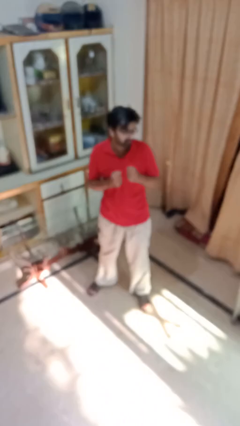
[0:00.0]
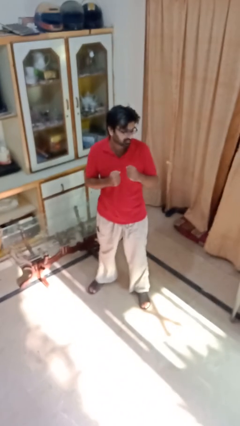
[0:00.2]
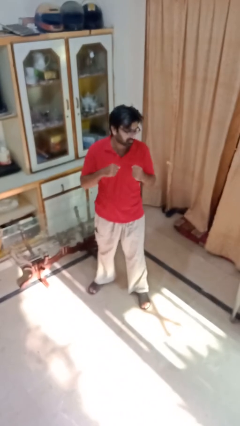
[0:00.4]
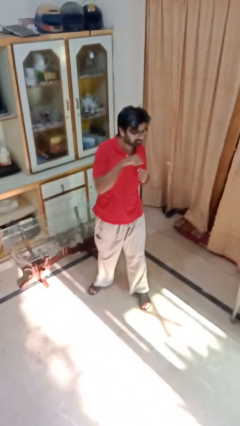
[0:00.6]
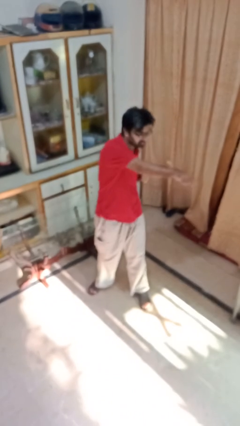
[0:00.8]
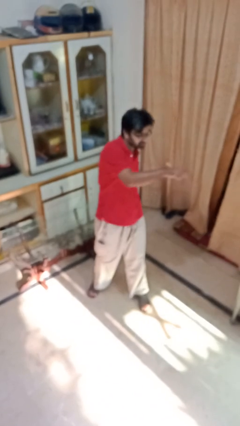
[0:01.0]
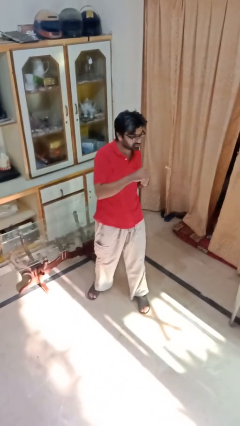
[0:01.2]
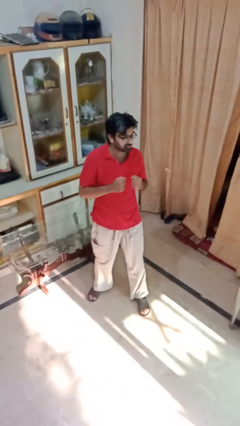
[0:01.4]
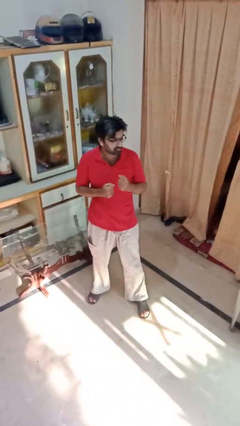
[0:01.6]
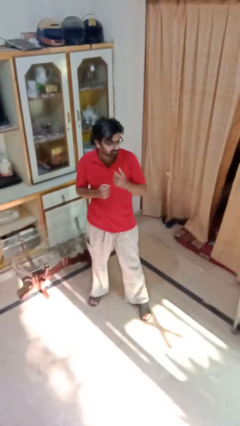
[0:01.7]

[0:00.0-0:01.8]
person punches

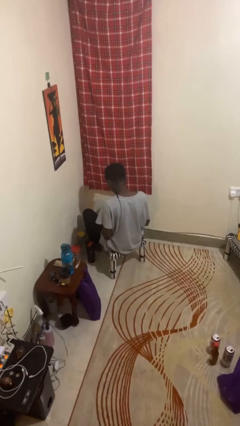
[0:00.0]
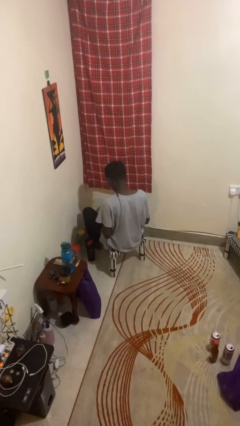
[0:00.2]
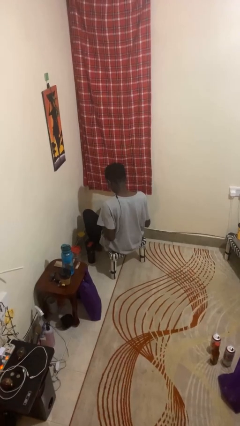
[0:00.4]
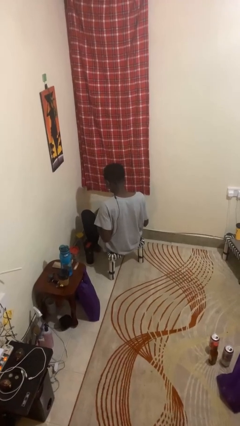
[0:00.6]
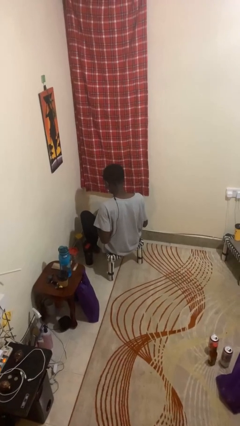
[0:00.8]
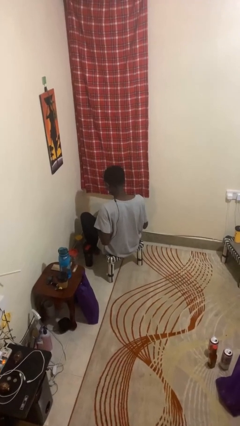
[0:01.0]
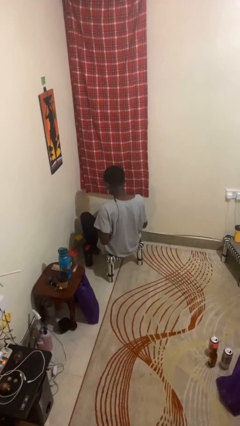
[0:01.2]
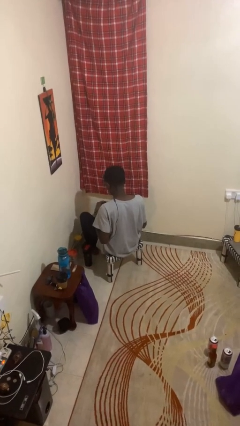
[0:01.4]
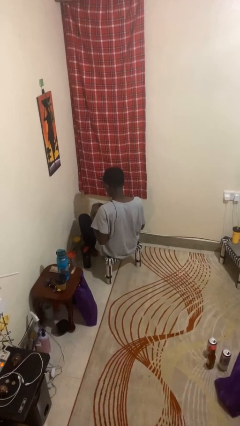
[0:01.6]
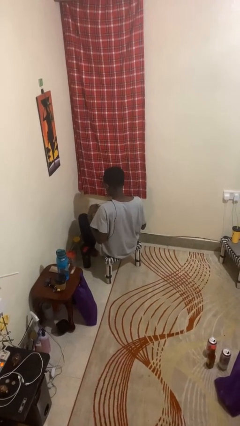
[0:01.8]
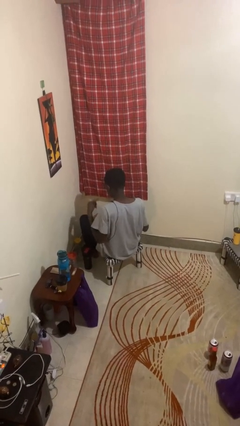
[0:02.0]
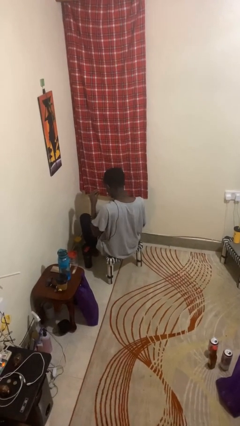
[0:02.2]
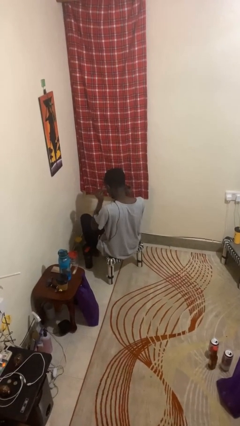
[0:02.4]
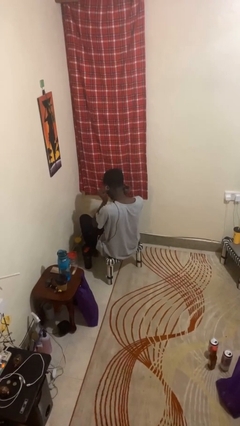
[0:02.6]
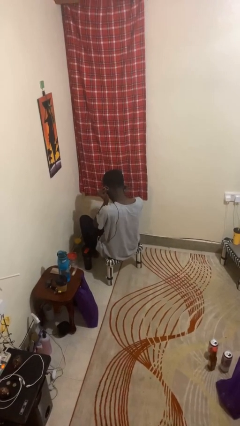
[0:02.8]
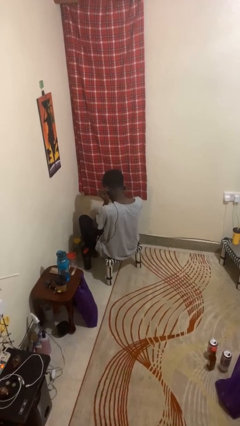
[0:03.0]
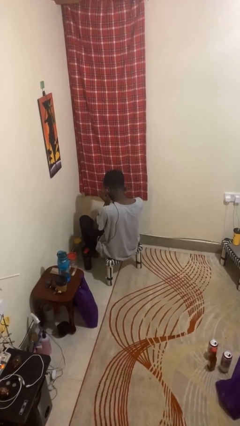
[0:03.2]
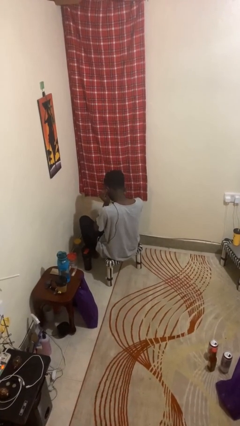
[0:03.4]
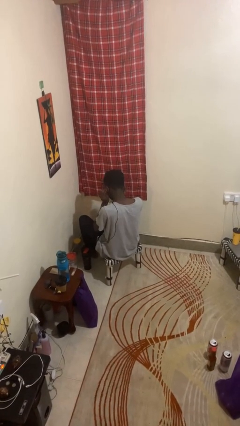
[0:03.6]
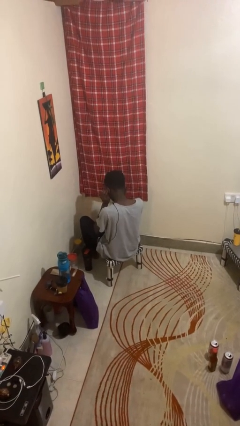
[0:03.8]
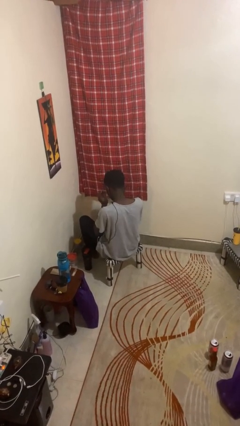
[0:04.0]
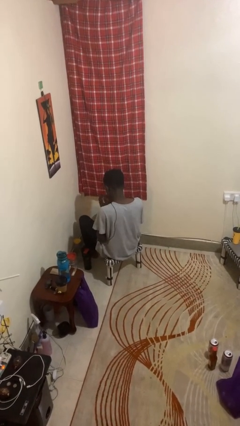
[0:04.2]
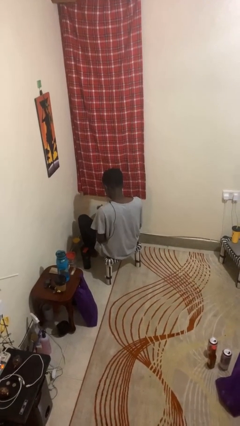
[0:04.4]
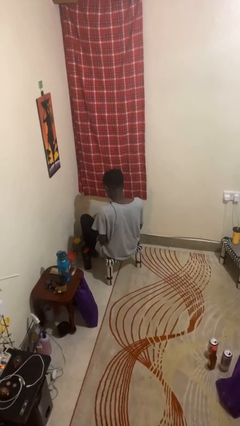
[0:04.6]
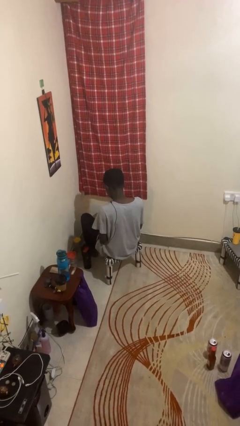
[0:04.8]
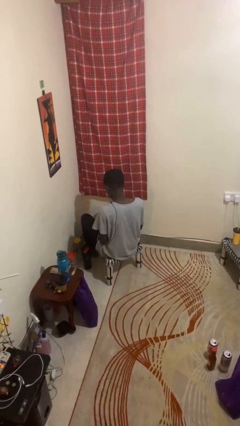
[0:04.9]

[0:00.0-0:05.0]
person puts on headphones

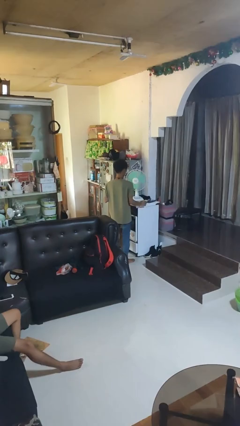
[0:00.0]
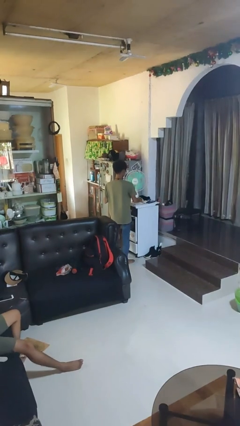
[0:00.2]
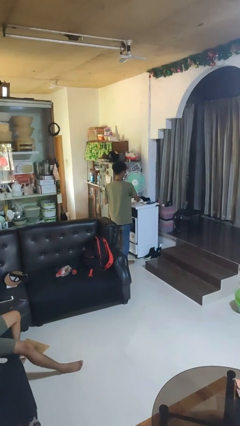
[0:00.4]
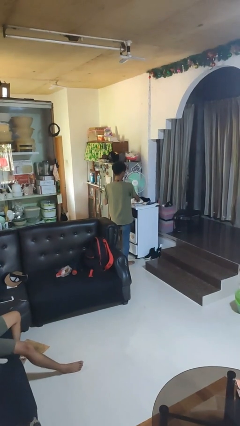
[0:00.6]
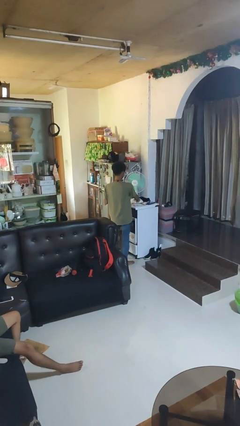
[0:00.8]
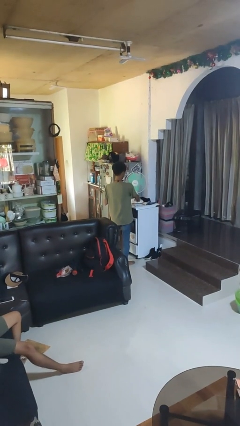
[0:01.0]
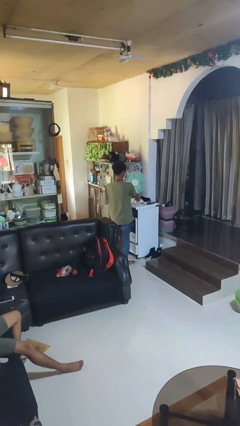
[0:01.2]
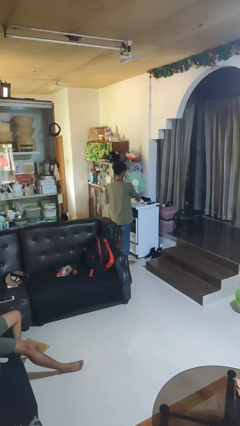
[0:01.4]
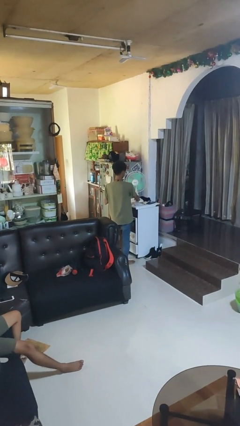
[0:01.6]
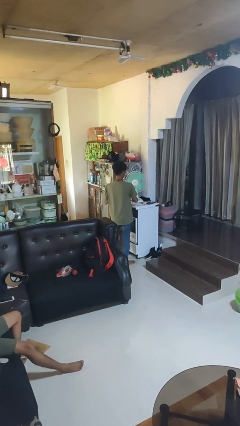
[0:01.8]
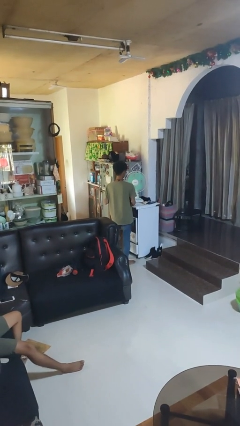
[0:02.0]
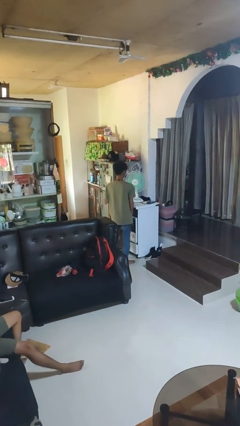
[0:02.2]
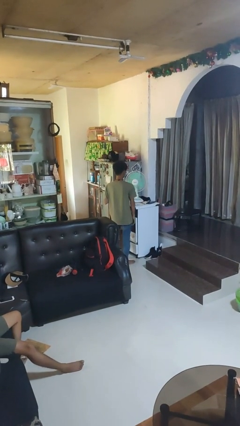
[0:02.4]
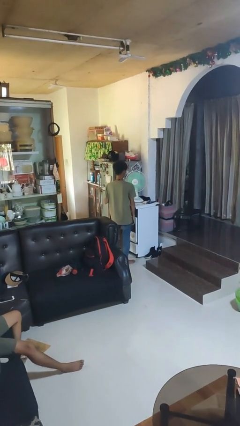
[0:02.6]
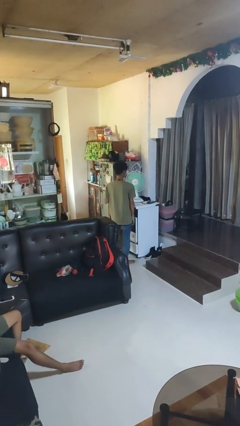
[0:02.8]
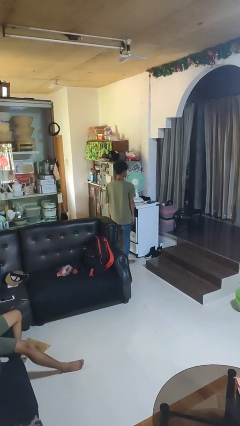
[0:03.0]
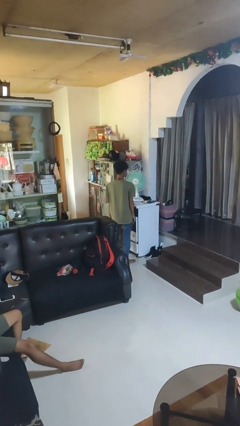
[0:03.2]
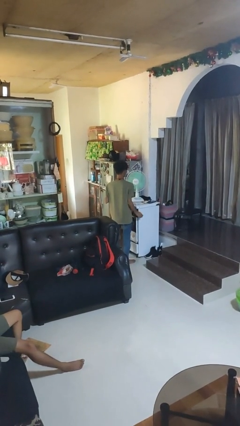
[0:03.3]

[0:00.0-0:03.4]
person turns on fan

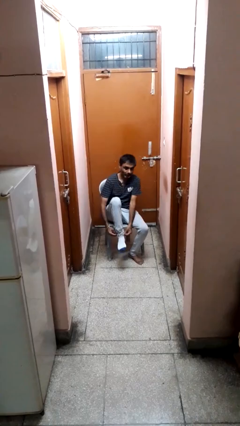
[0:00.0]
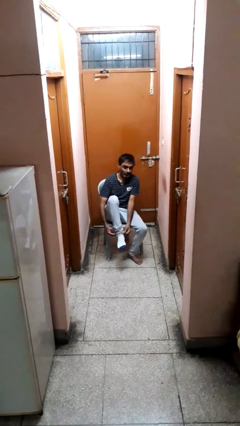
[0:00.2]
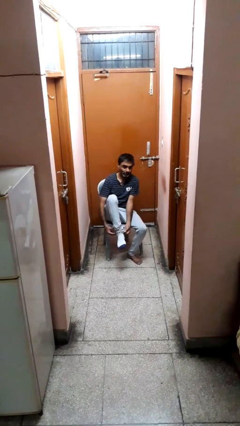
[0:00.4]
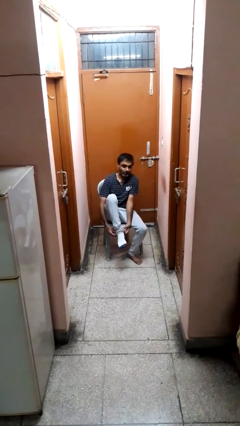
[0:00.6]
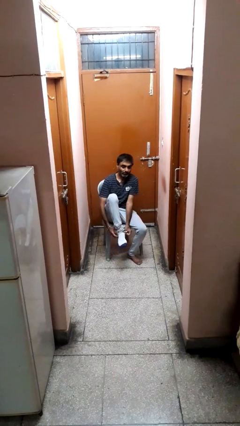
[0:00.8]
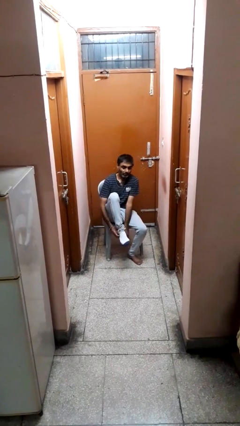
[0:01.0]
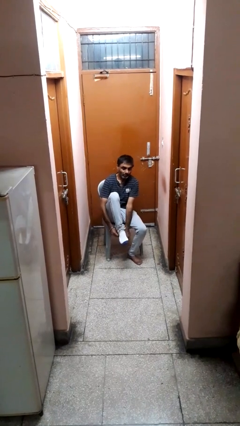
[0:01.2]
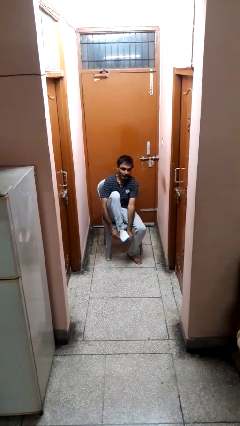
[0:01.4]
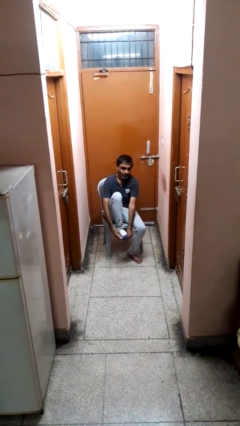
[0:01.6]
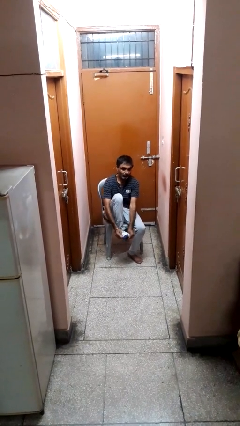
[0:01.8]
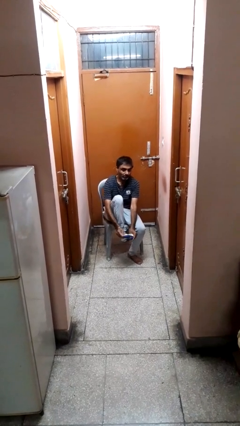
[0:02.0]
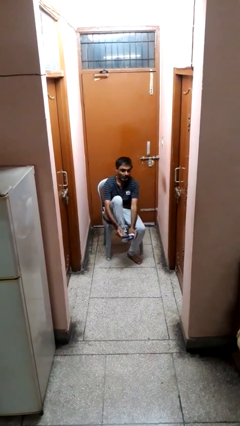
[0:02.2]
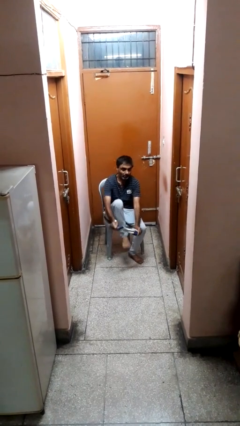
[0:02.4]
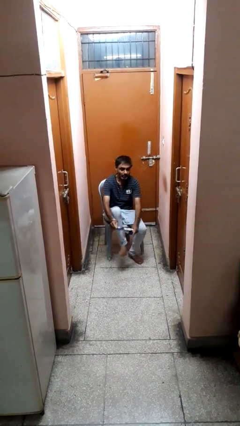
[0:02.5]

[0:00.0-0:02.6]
person takes off socks

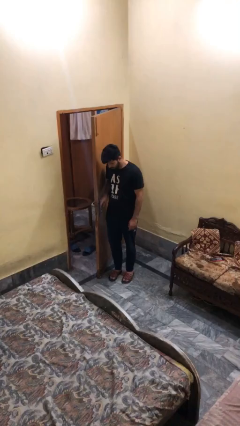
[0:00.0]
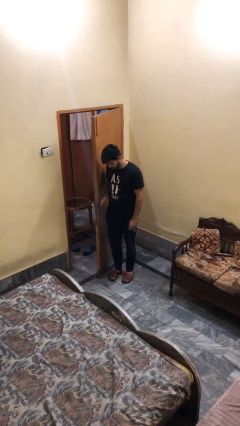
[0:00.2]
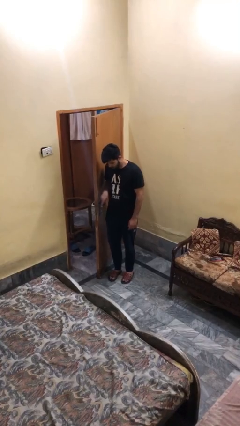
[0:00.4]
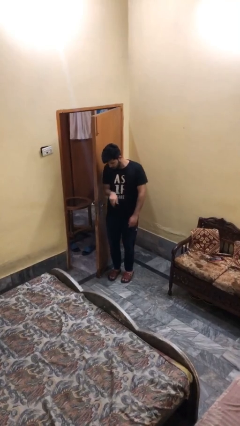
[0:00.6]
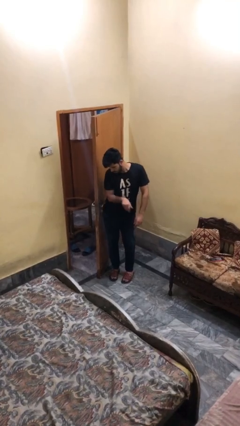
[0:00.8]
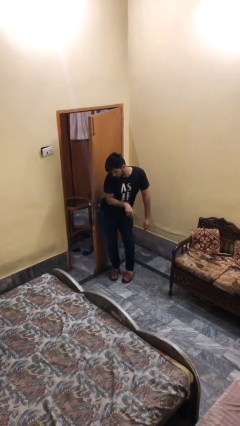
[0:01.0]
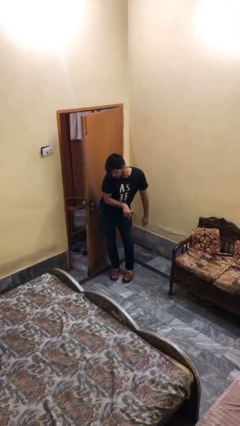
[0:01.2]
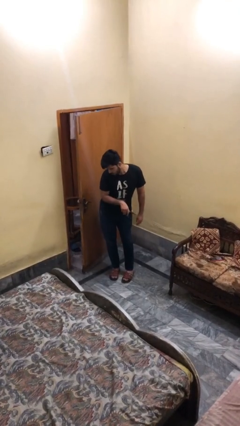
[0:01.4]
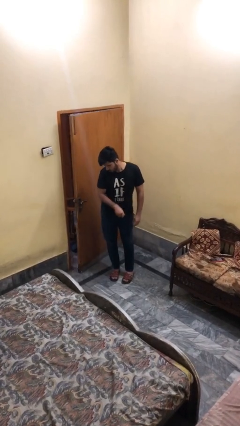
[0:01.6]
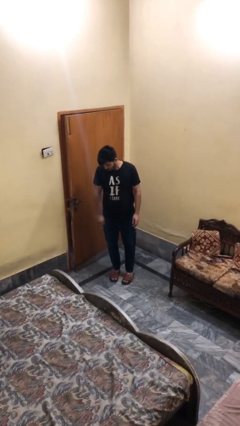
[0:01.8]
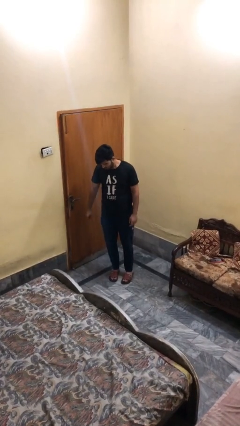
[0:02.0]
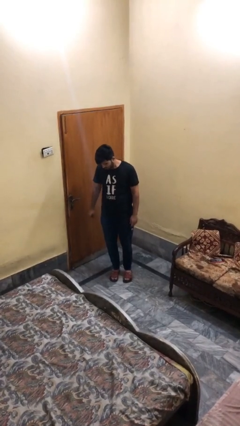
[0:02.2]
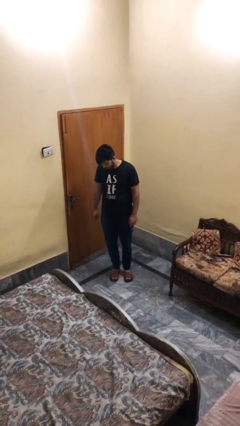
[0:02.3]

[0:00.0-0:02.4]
person closes door with hip

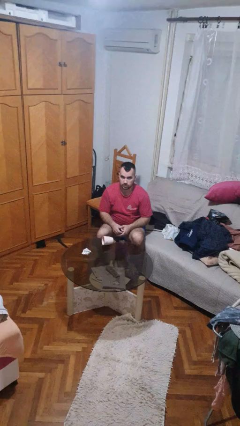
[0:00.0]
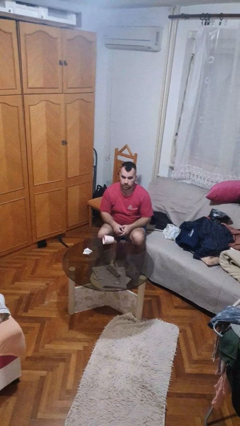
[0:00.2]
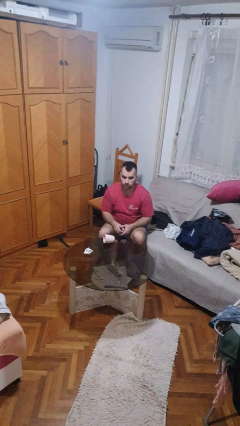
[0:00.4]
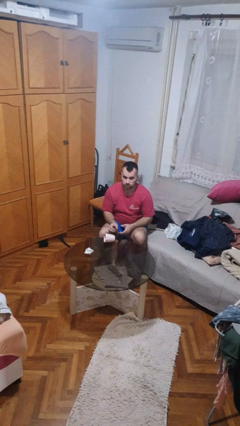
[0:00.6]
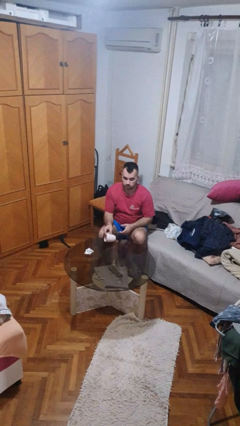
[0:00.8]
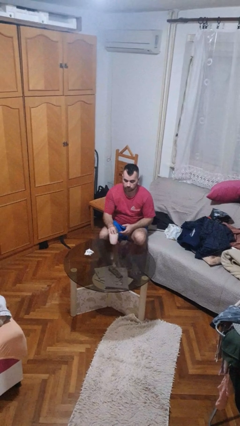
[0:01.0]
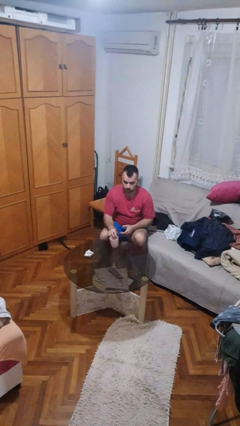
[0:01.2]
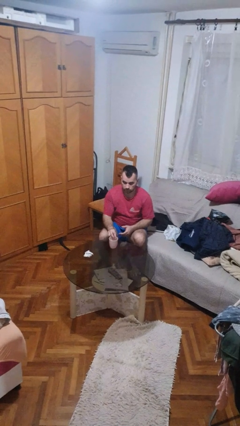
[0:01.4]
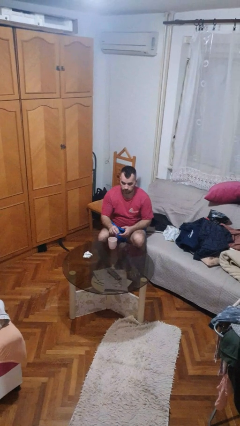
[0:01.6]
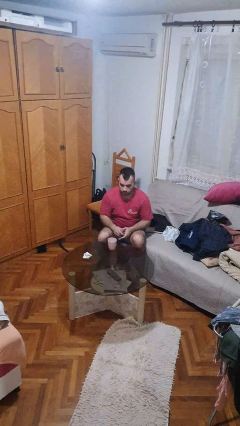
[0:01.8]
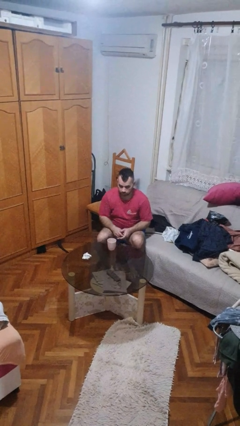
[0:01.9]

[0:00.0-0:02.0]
person sets upright glass

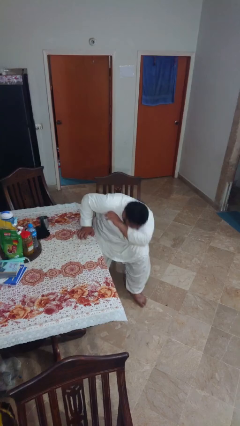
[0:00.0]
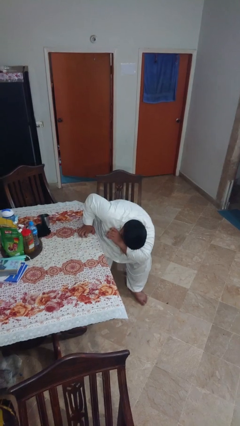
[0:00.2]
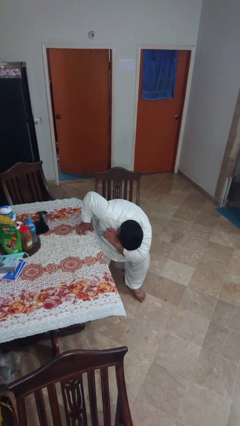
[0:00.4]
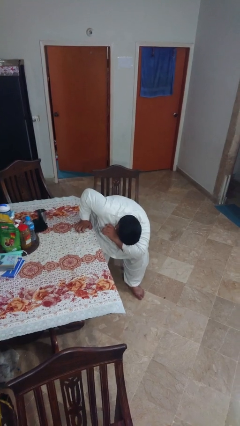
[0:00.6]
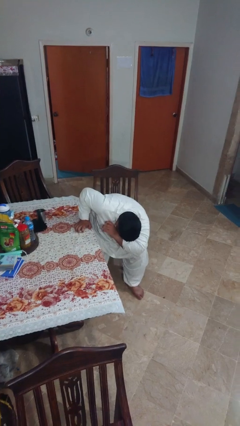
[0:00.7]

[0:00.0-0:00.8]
person sneezes into arm
